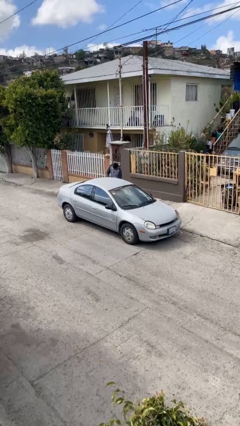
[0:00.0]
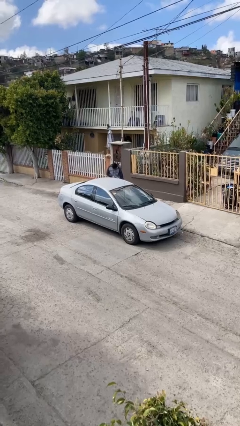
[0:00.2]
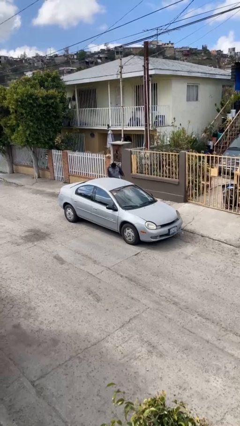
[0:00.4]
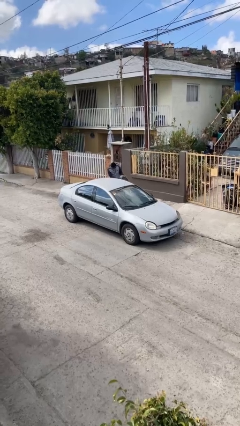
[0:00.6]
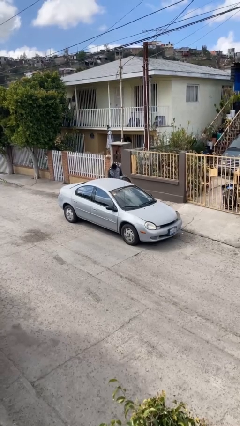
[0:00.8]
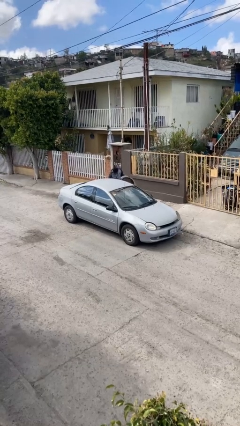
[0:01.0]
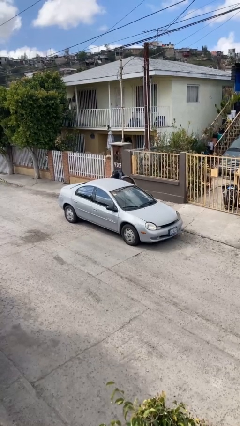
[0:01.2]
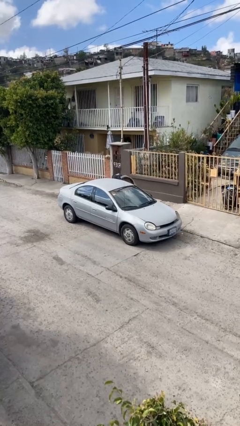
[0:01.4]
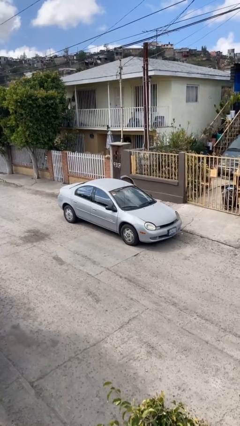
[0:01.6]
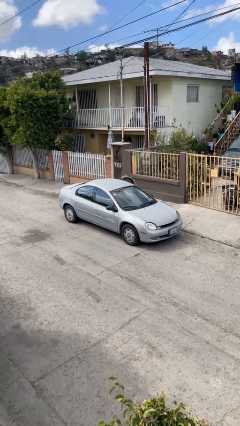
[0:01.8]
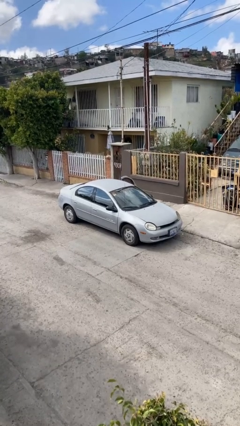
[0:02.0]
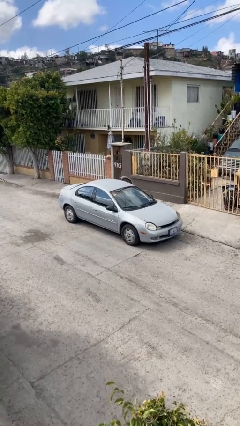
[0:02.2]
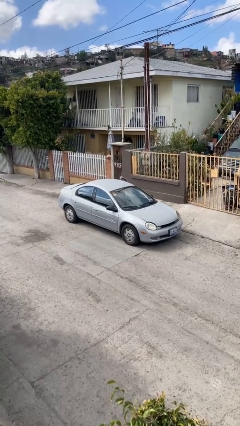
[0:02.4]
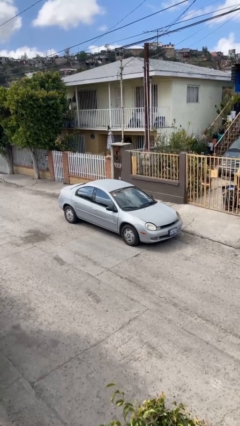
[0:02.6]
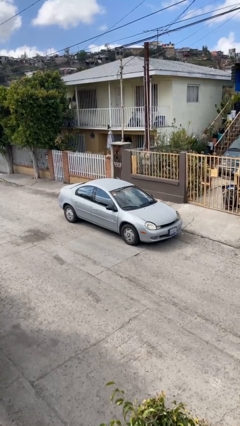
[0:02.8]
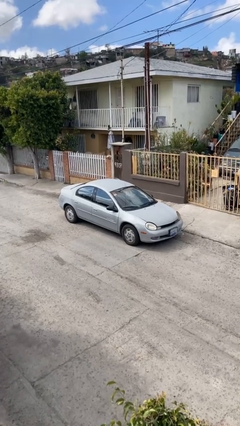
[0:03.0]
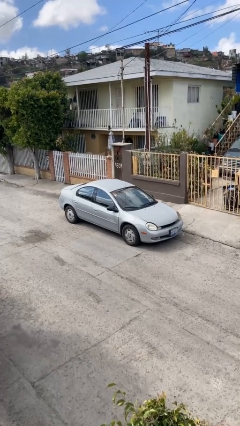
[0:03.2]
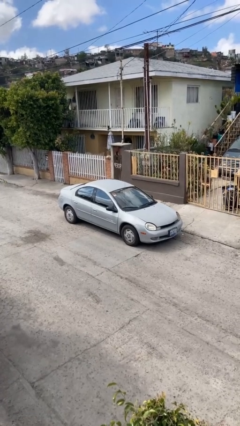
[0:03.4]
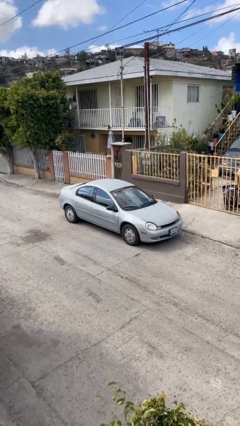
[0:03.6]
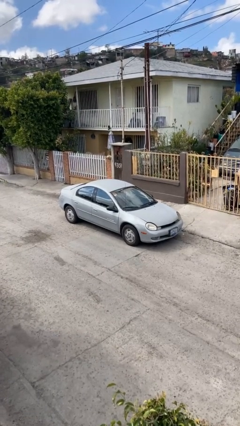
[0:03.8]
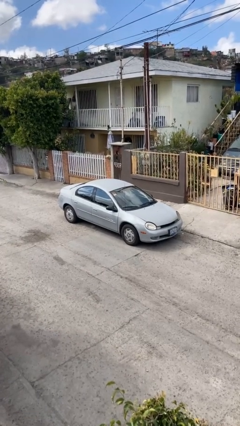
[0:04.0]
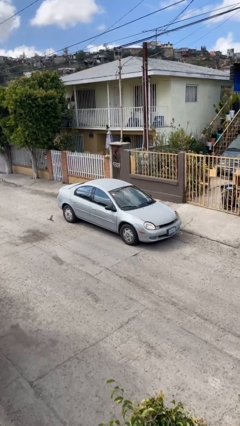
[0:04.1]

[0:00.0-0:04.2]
car picks up person

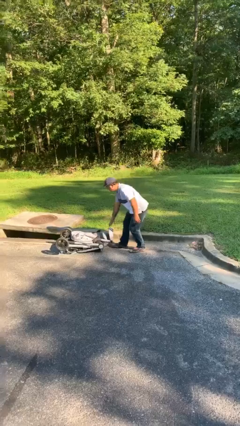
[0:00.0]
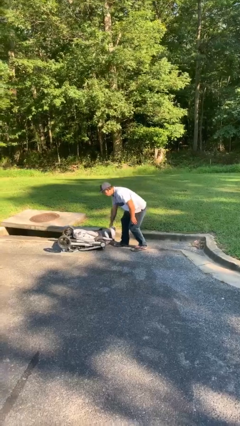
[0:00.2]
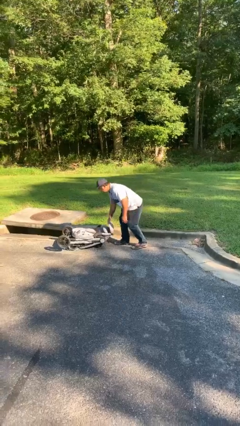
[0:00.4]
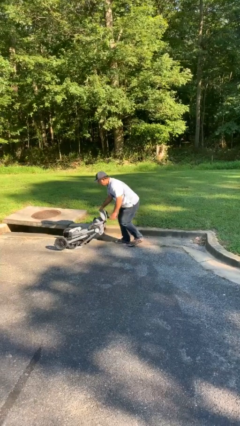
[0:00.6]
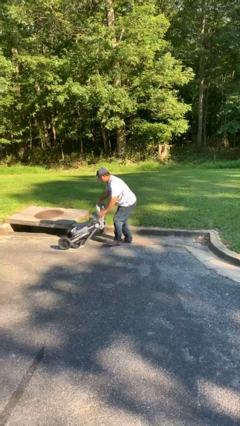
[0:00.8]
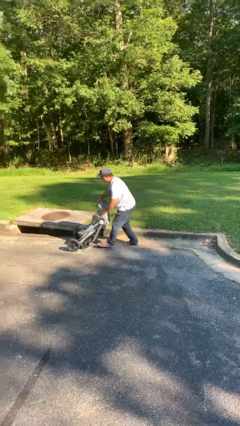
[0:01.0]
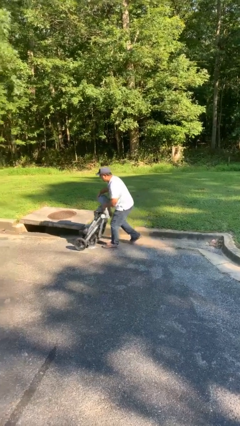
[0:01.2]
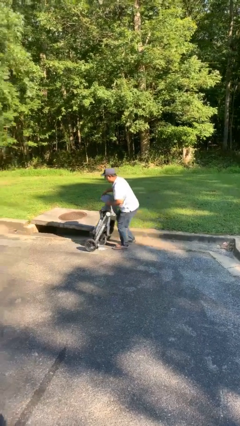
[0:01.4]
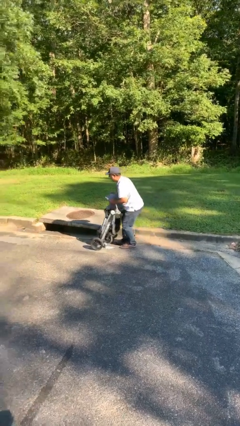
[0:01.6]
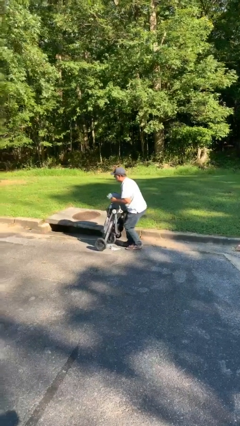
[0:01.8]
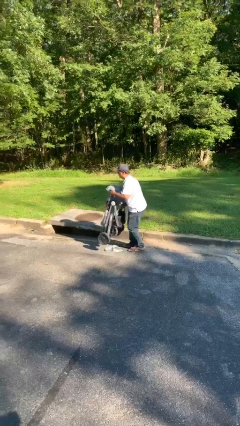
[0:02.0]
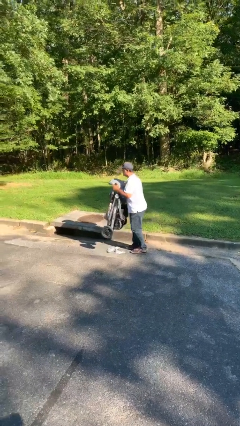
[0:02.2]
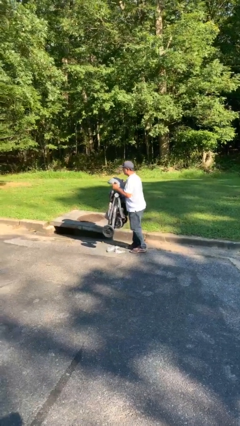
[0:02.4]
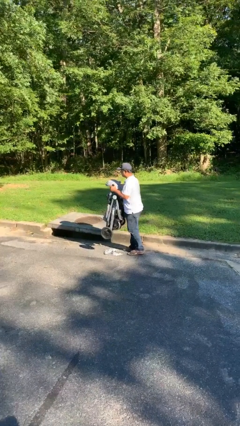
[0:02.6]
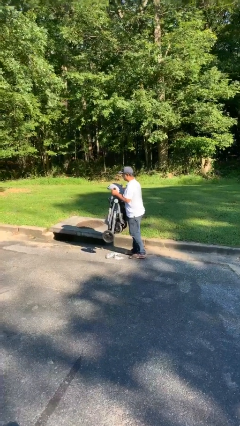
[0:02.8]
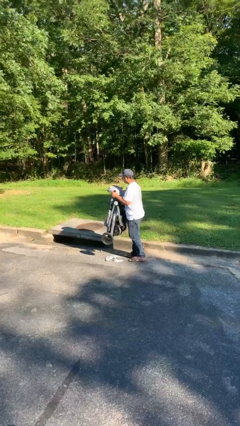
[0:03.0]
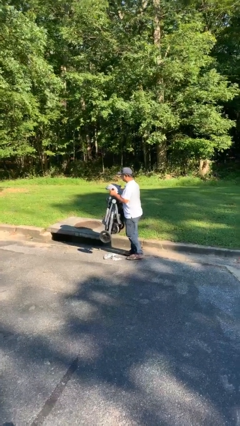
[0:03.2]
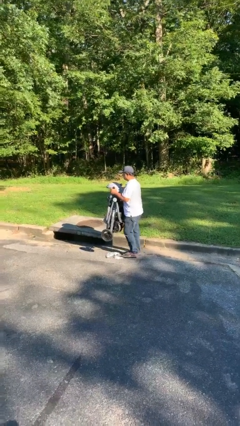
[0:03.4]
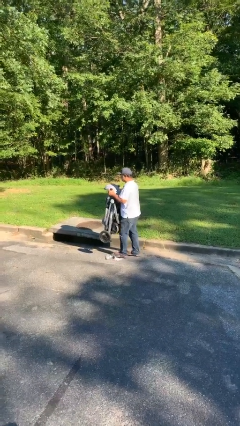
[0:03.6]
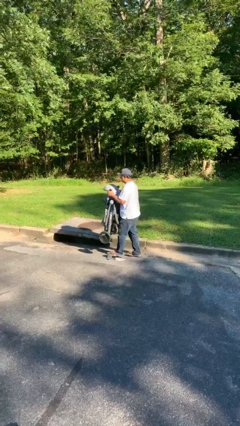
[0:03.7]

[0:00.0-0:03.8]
person picks up object from floor

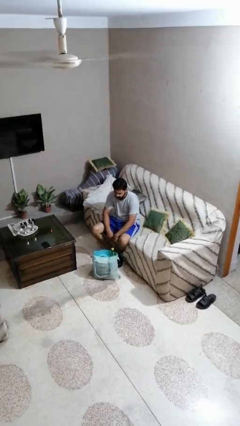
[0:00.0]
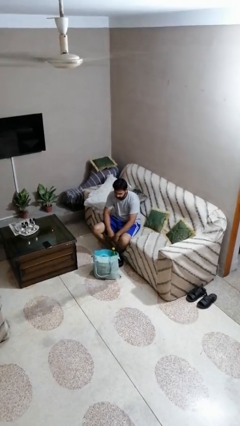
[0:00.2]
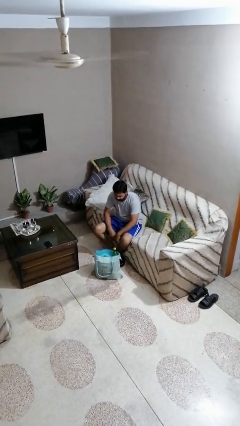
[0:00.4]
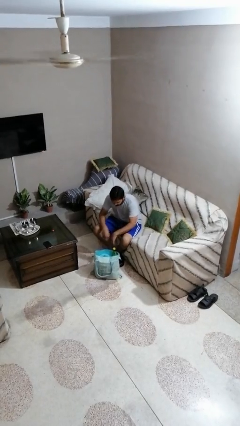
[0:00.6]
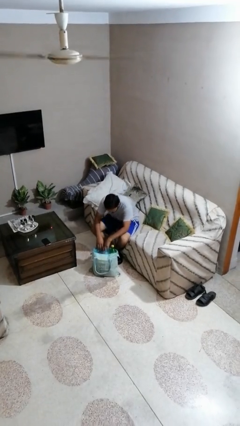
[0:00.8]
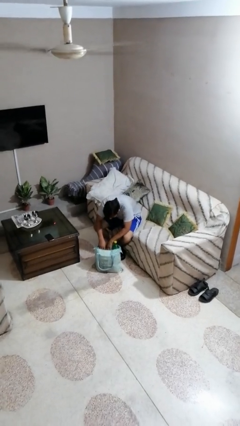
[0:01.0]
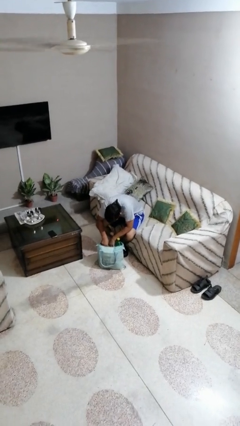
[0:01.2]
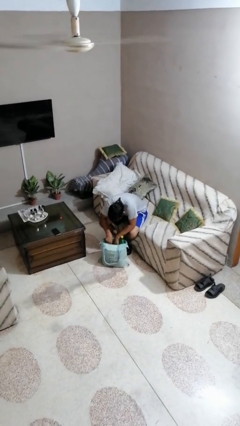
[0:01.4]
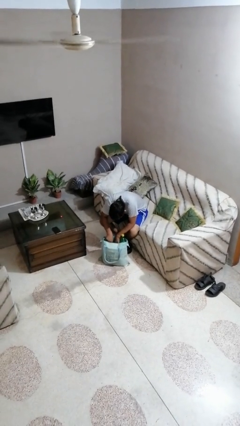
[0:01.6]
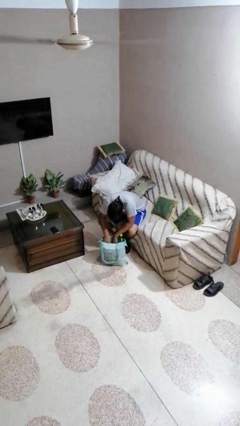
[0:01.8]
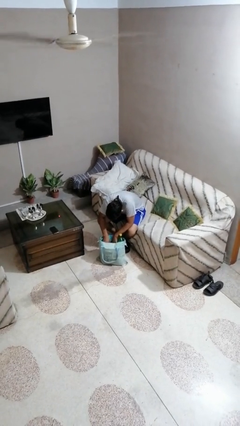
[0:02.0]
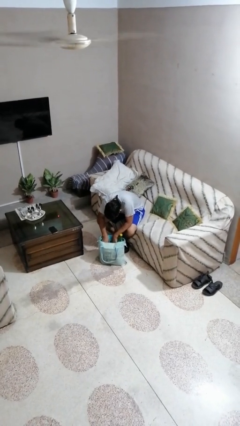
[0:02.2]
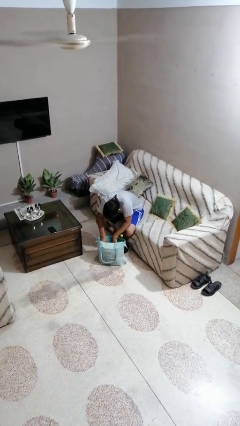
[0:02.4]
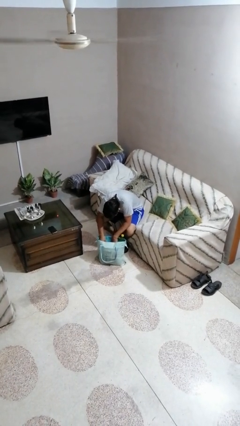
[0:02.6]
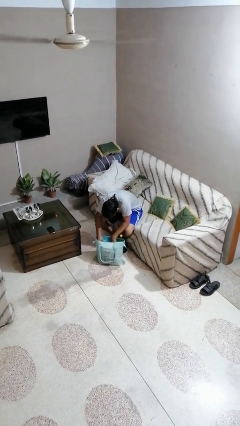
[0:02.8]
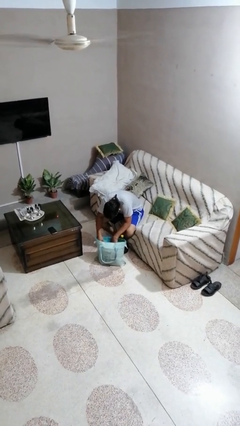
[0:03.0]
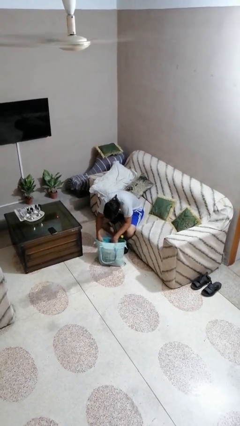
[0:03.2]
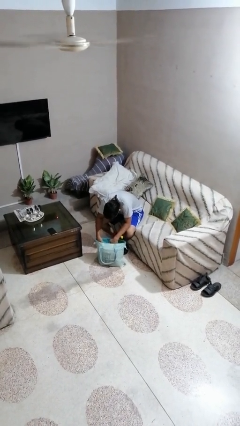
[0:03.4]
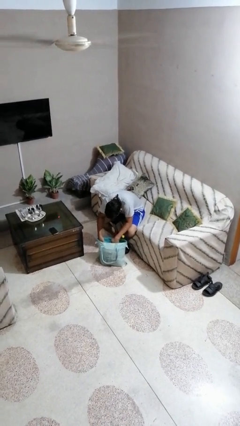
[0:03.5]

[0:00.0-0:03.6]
person searches in bag

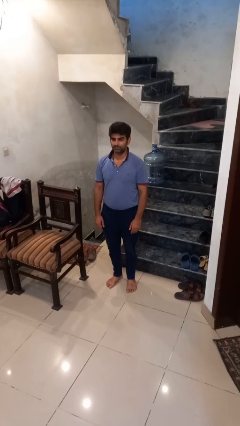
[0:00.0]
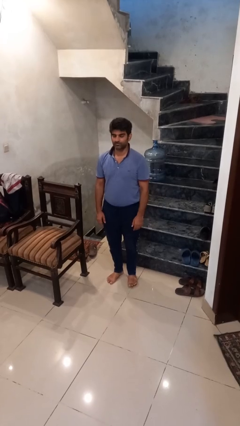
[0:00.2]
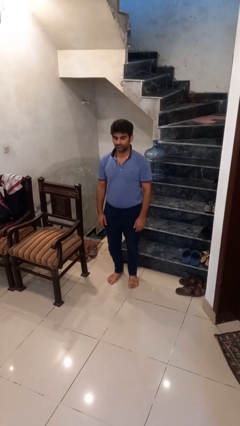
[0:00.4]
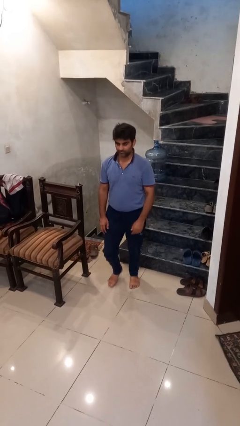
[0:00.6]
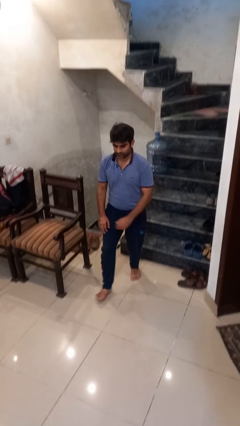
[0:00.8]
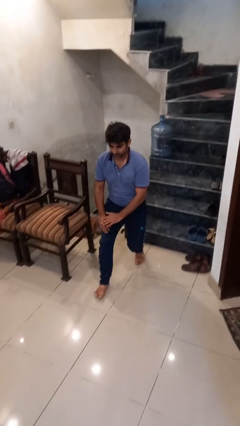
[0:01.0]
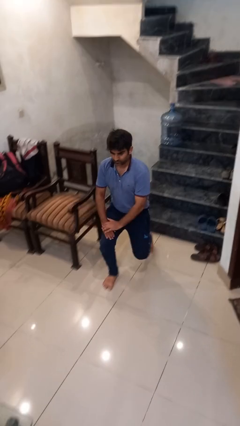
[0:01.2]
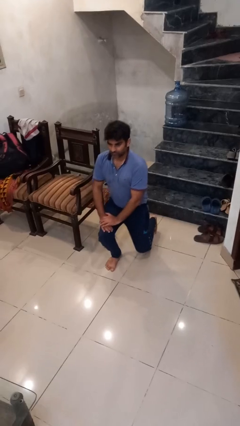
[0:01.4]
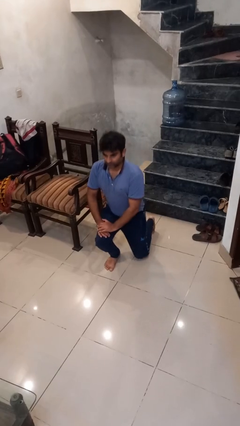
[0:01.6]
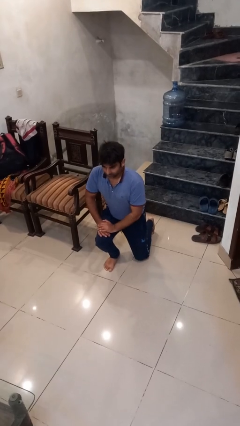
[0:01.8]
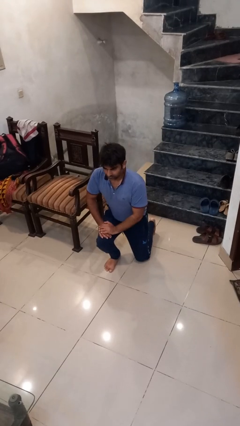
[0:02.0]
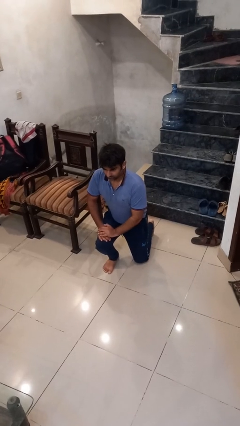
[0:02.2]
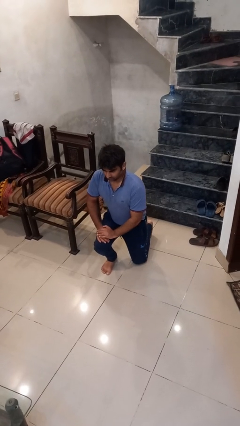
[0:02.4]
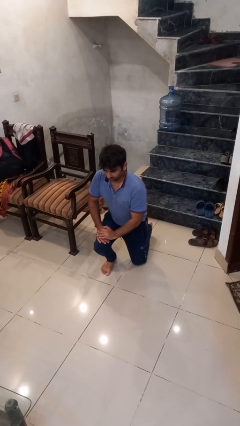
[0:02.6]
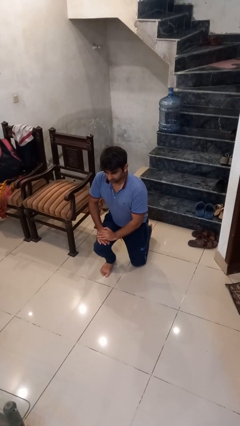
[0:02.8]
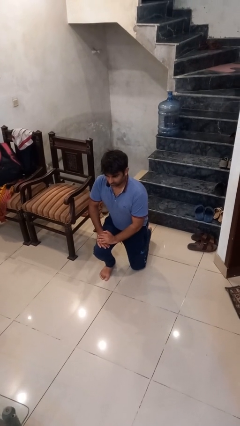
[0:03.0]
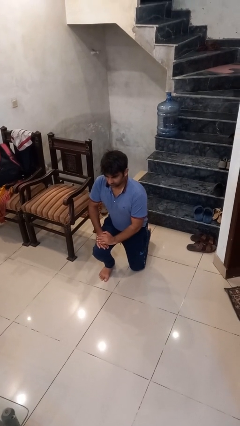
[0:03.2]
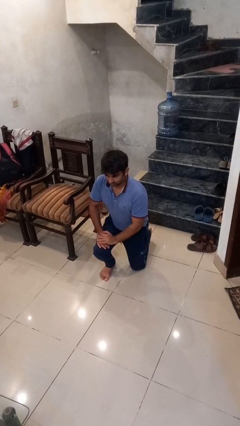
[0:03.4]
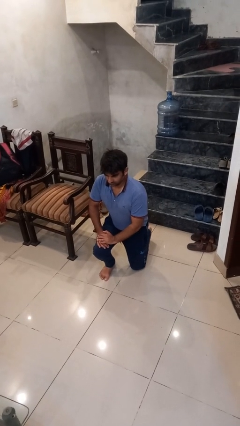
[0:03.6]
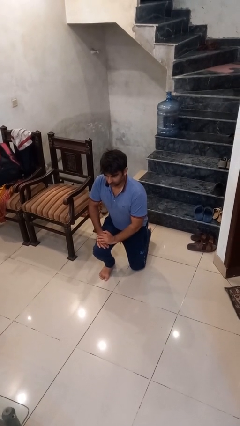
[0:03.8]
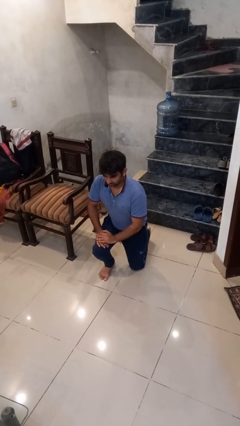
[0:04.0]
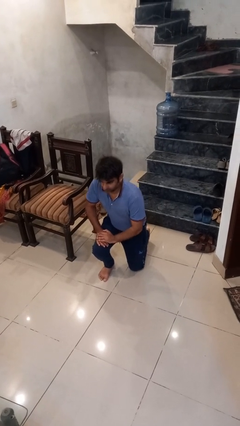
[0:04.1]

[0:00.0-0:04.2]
person kneels

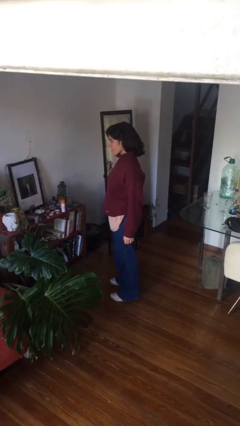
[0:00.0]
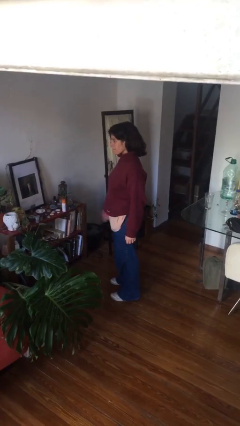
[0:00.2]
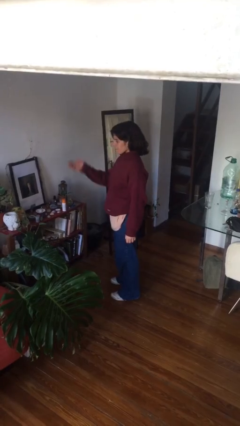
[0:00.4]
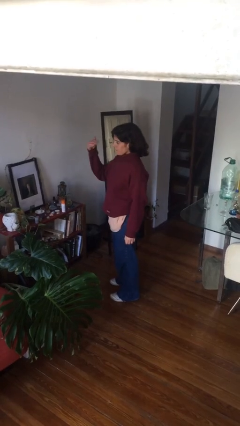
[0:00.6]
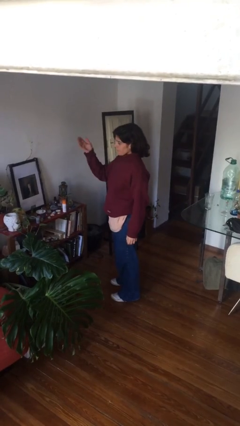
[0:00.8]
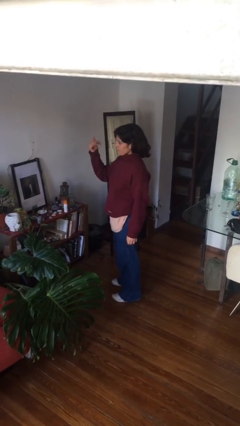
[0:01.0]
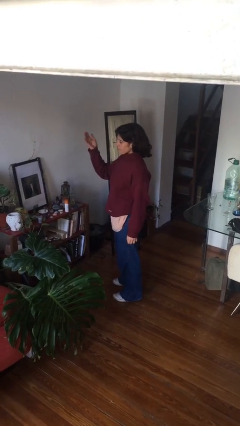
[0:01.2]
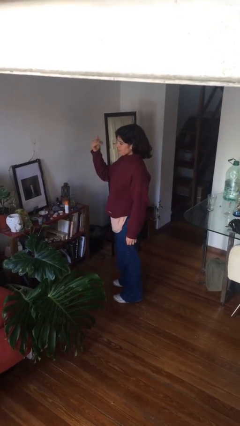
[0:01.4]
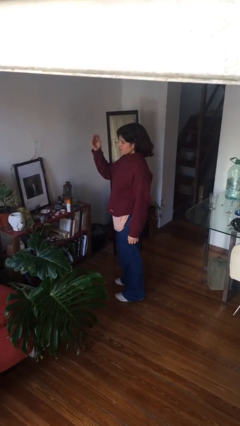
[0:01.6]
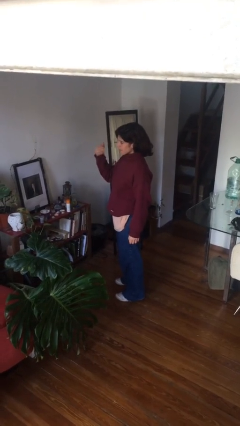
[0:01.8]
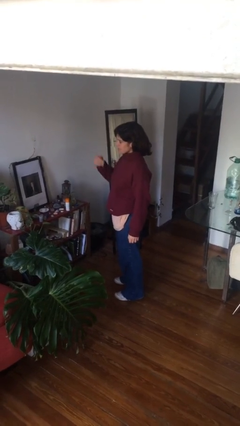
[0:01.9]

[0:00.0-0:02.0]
person gestures come here
